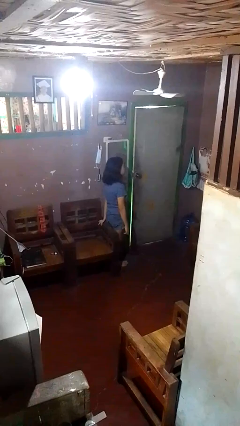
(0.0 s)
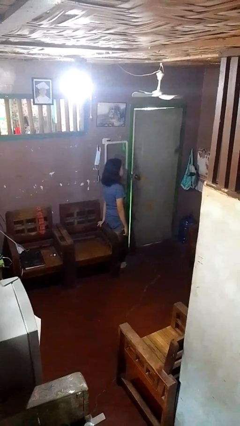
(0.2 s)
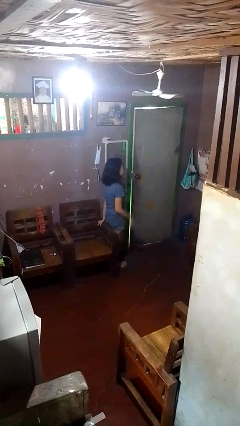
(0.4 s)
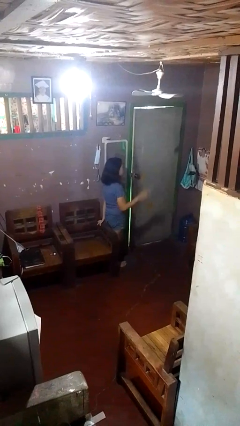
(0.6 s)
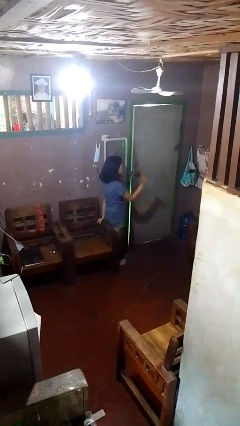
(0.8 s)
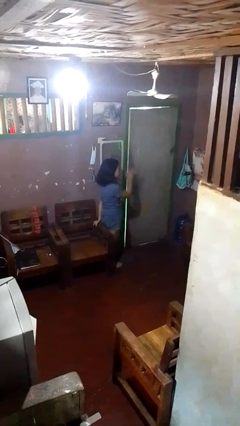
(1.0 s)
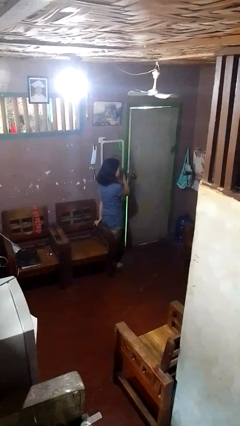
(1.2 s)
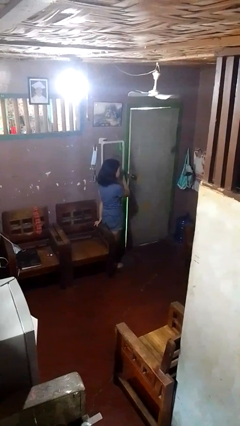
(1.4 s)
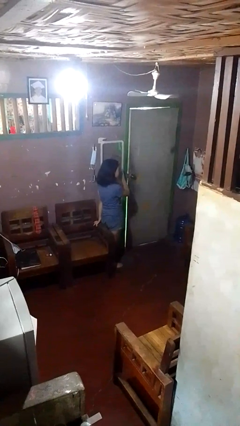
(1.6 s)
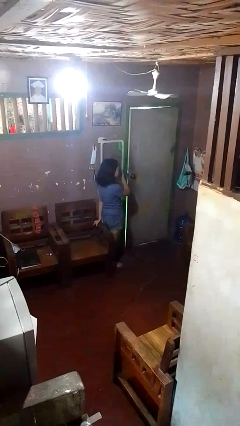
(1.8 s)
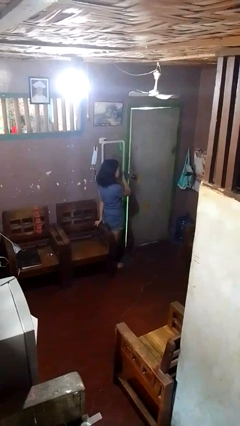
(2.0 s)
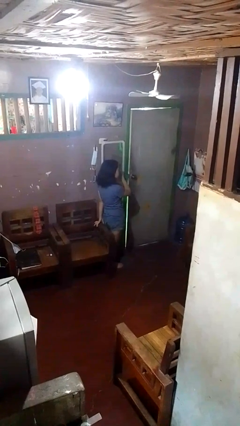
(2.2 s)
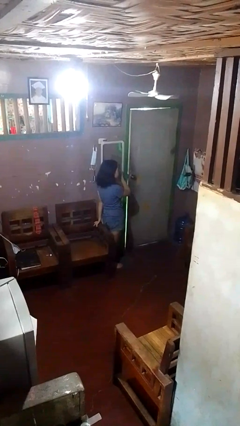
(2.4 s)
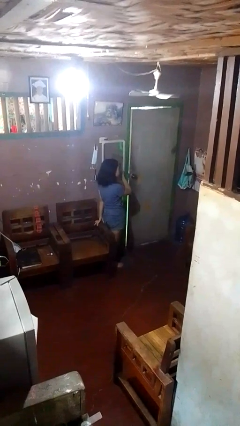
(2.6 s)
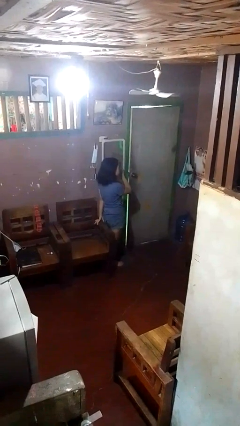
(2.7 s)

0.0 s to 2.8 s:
person gestures swipe left
